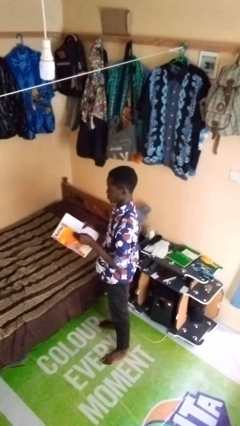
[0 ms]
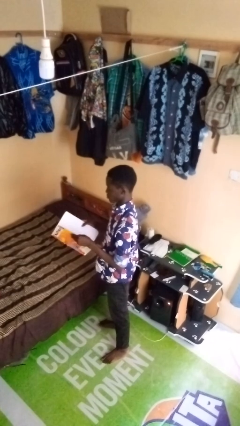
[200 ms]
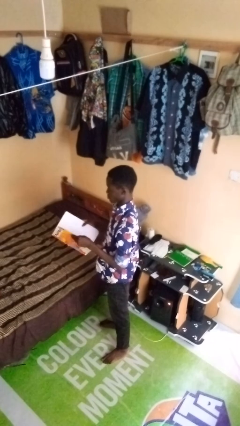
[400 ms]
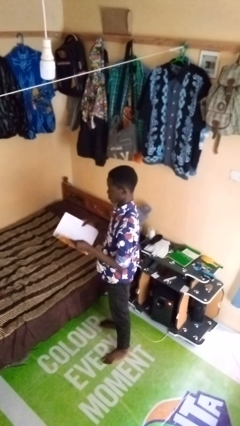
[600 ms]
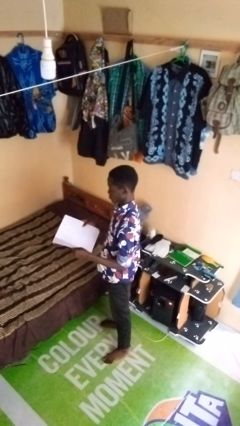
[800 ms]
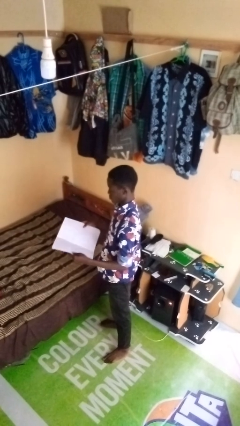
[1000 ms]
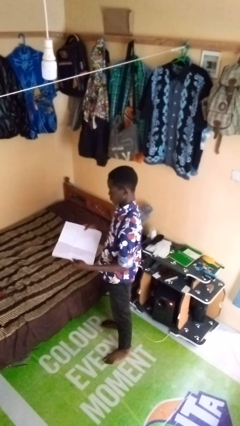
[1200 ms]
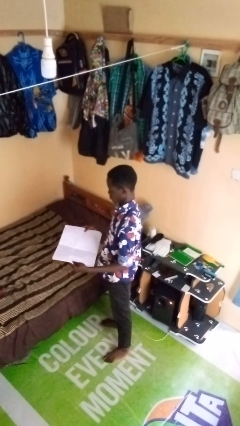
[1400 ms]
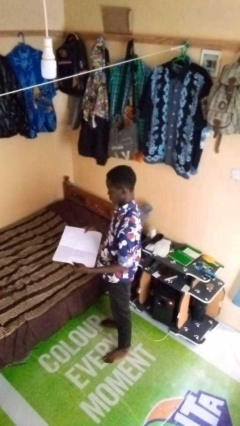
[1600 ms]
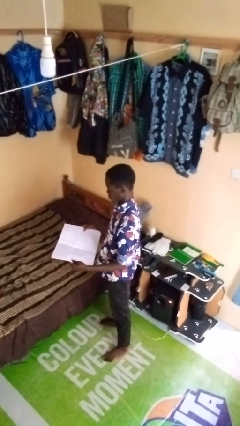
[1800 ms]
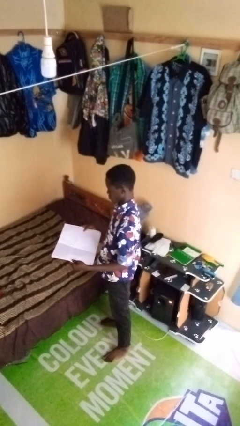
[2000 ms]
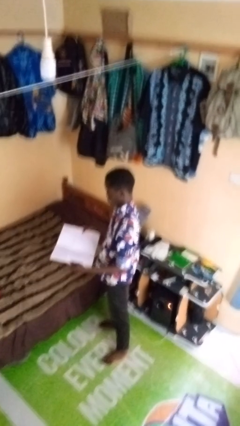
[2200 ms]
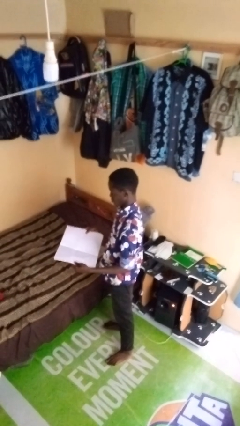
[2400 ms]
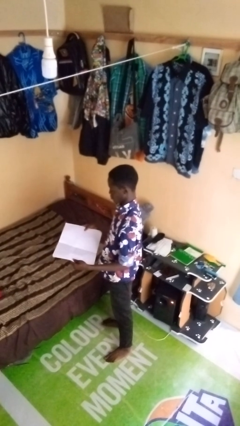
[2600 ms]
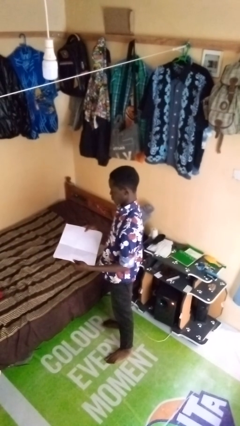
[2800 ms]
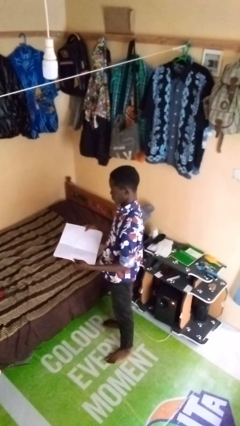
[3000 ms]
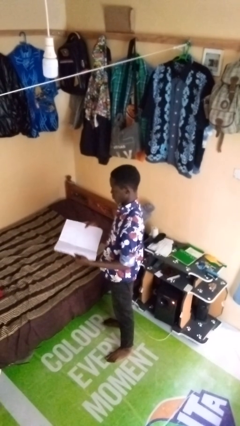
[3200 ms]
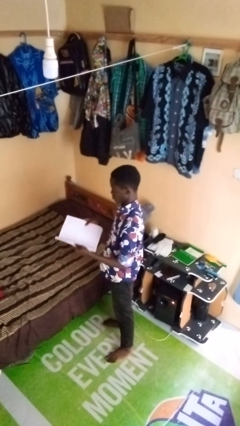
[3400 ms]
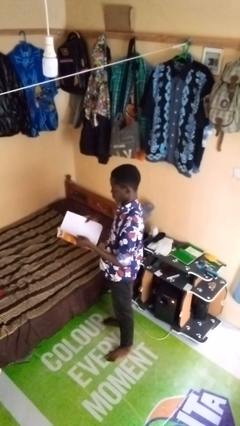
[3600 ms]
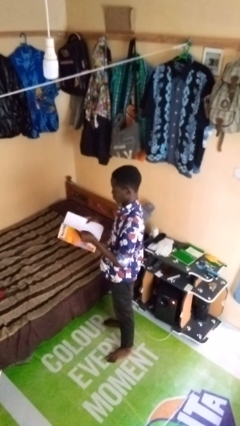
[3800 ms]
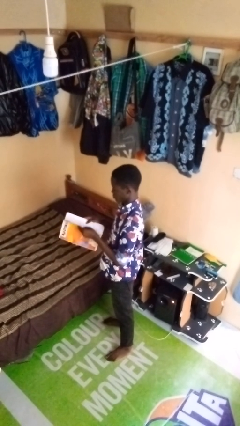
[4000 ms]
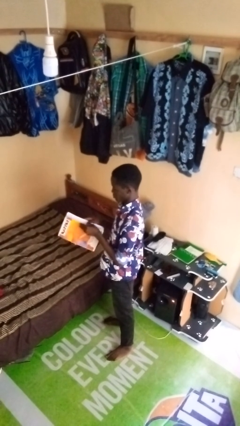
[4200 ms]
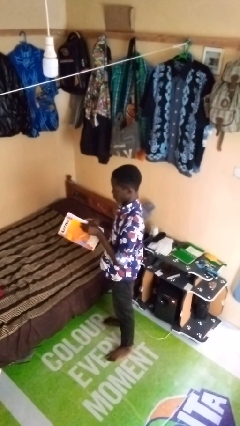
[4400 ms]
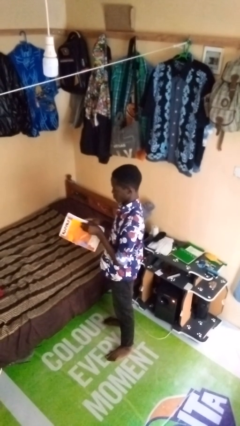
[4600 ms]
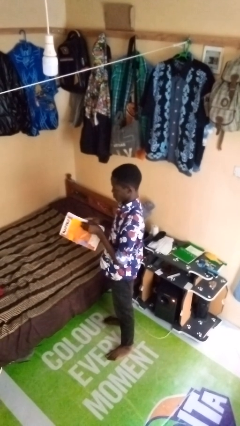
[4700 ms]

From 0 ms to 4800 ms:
person reads book

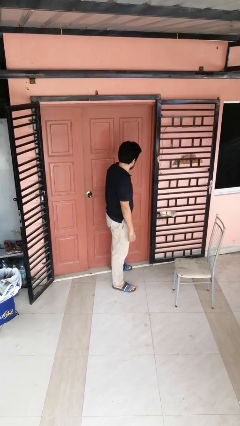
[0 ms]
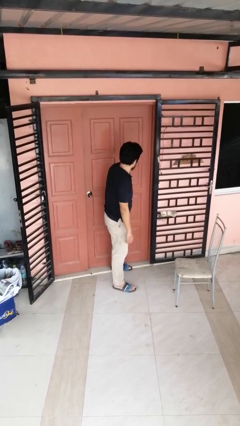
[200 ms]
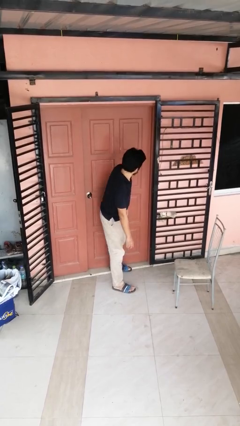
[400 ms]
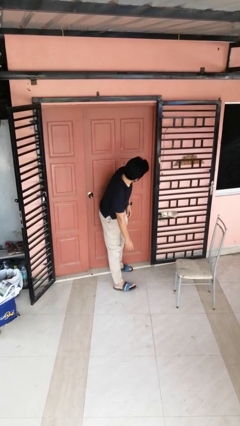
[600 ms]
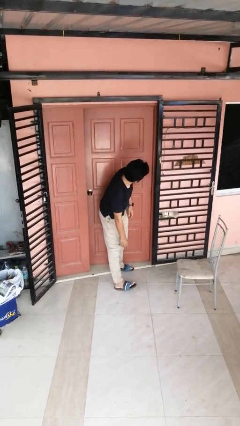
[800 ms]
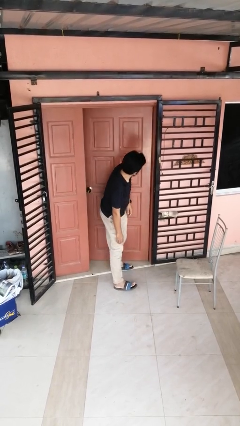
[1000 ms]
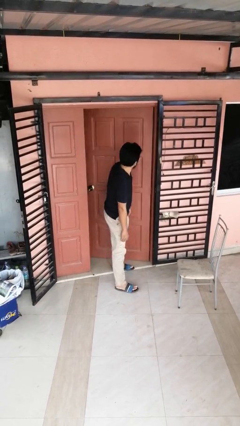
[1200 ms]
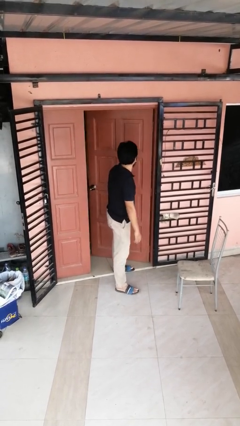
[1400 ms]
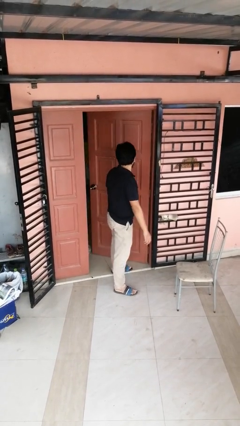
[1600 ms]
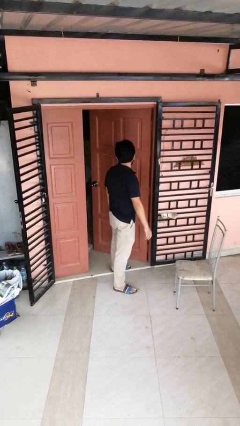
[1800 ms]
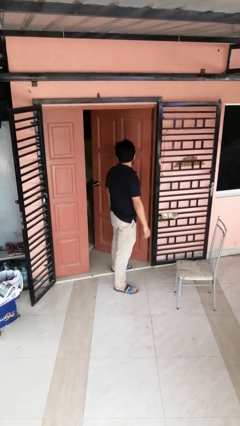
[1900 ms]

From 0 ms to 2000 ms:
person opens facility door

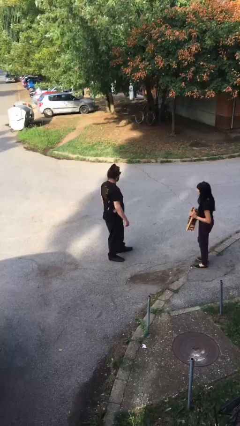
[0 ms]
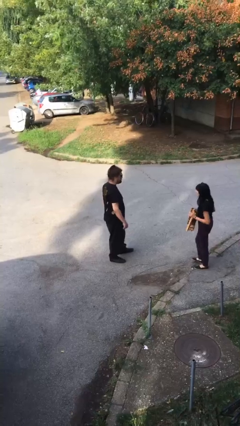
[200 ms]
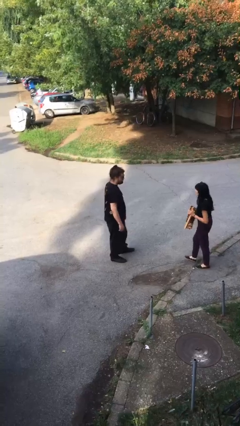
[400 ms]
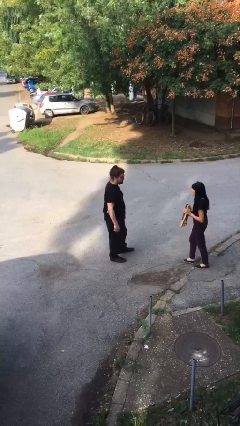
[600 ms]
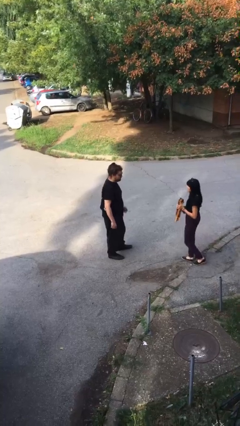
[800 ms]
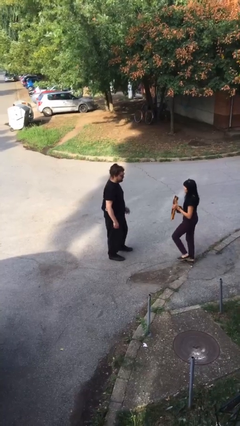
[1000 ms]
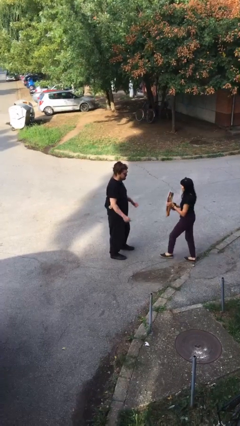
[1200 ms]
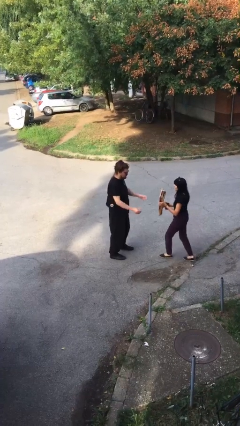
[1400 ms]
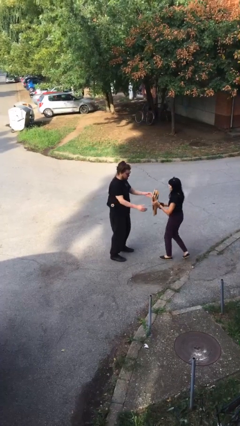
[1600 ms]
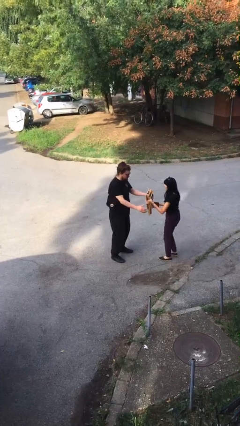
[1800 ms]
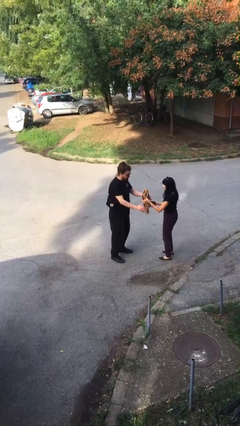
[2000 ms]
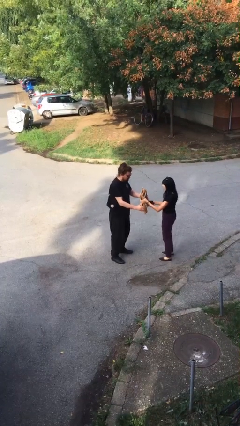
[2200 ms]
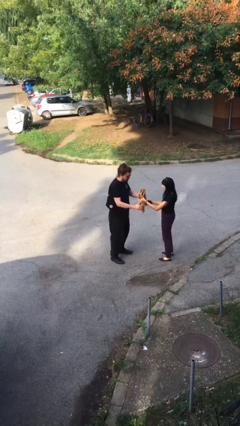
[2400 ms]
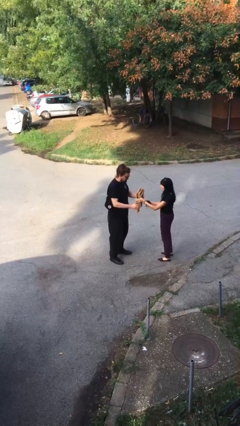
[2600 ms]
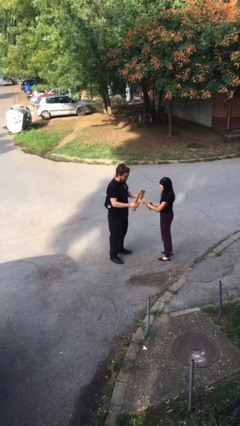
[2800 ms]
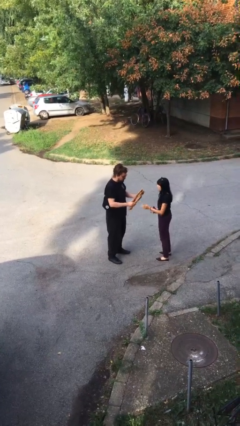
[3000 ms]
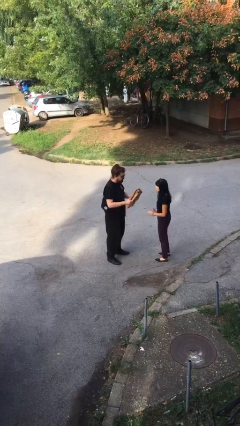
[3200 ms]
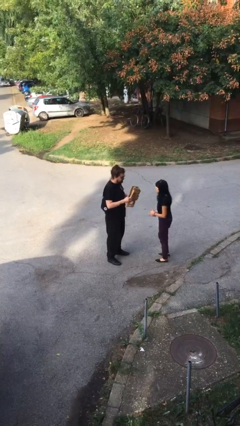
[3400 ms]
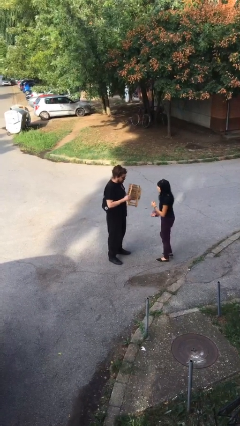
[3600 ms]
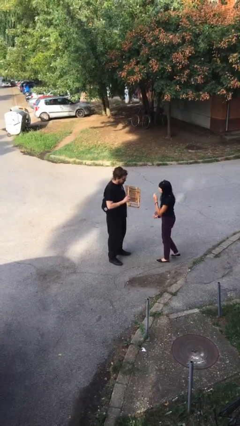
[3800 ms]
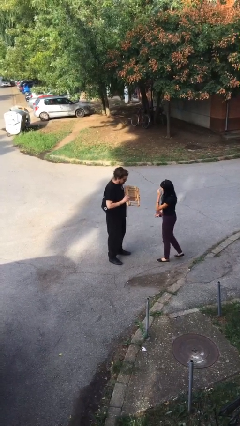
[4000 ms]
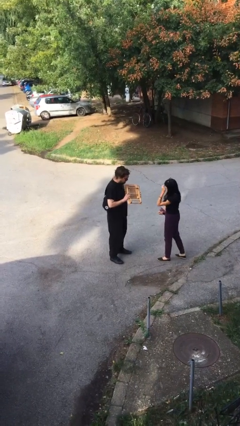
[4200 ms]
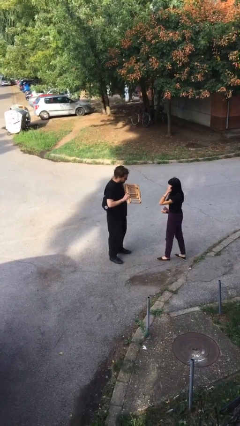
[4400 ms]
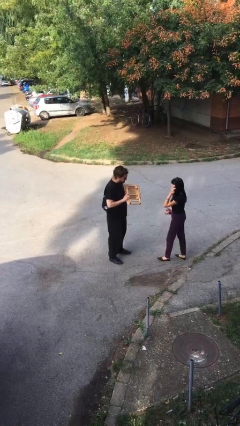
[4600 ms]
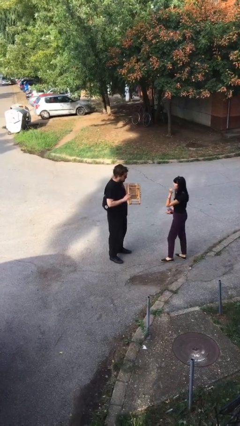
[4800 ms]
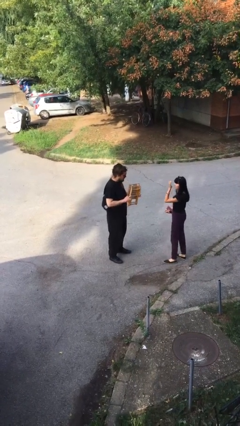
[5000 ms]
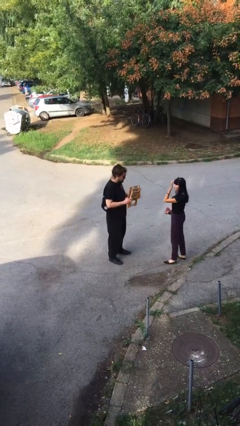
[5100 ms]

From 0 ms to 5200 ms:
person transfers object to person

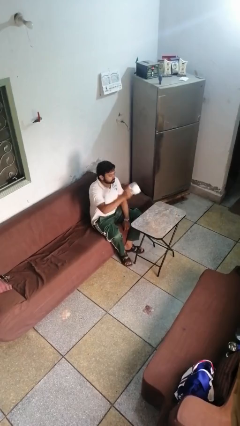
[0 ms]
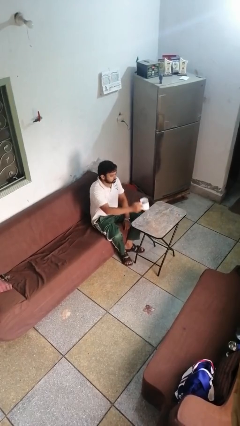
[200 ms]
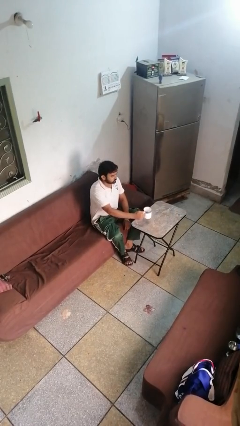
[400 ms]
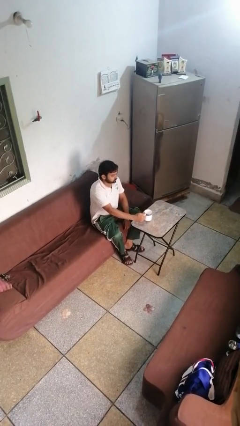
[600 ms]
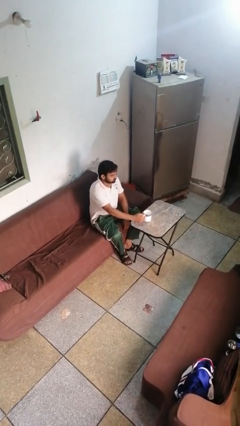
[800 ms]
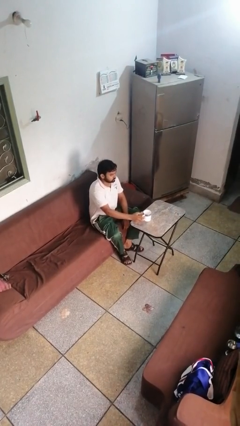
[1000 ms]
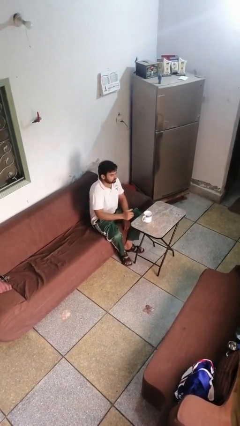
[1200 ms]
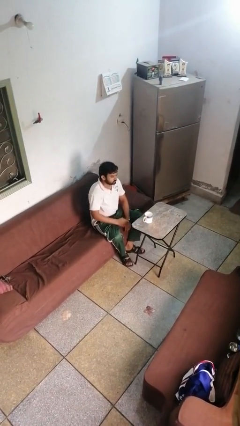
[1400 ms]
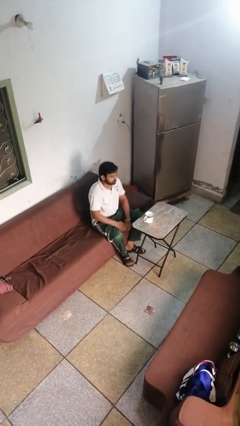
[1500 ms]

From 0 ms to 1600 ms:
person puts down object on table

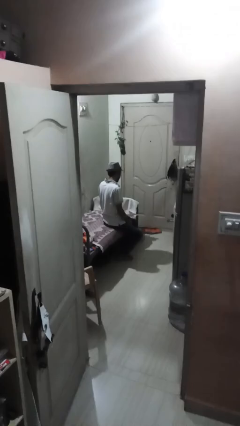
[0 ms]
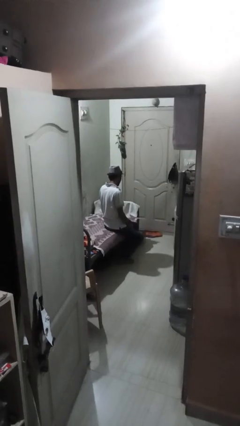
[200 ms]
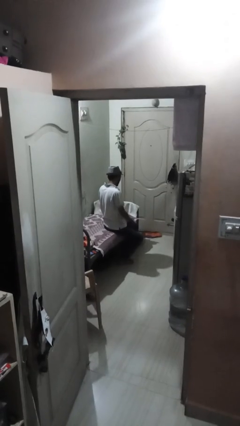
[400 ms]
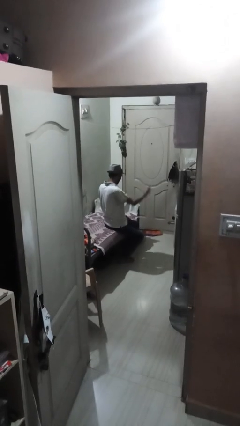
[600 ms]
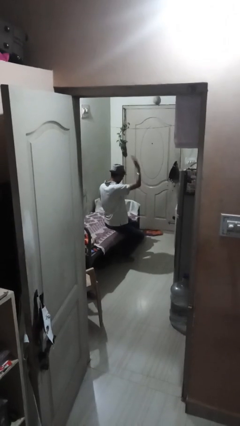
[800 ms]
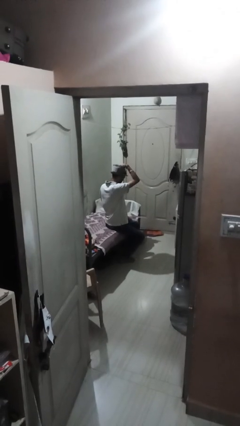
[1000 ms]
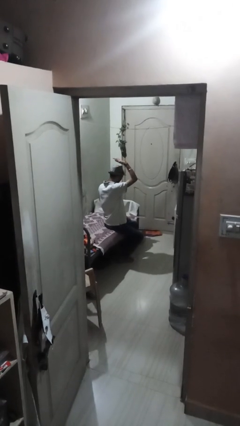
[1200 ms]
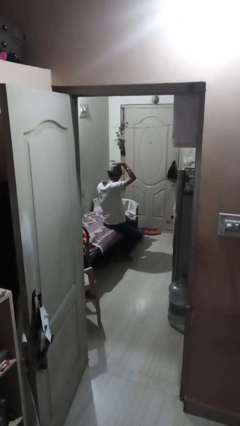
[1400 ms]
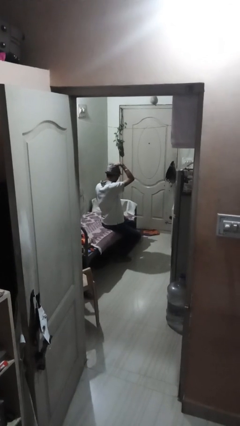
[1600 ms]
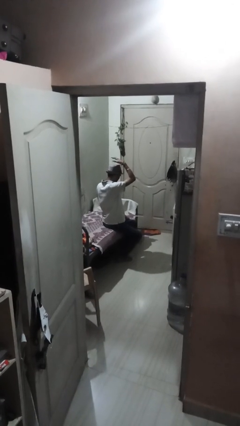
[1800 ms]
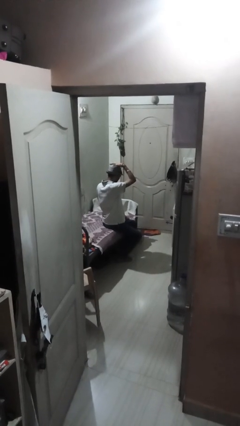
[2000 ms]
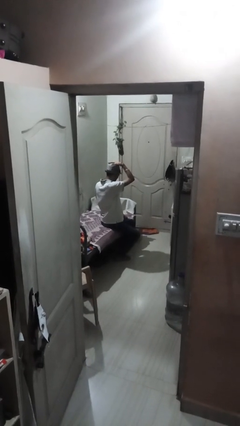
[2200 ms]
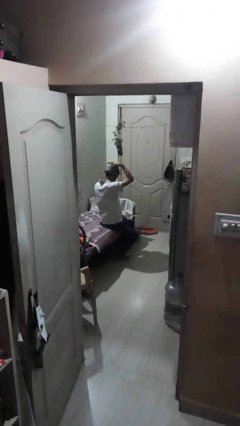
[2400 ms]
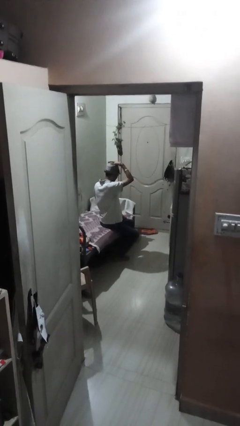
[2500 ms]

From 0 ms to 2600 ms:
person pats head

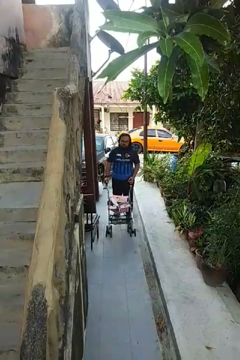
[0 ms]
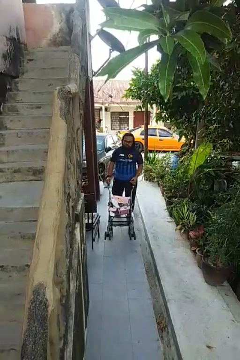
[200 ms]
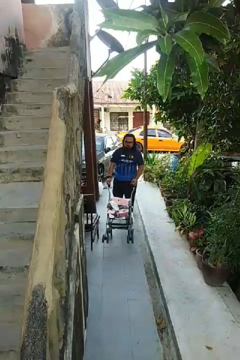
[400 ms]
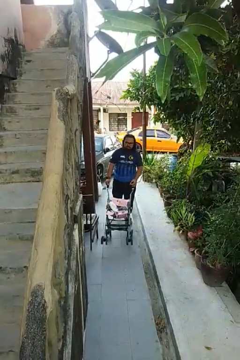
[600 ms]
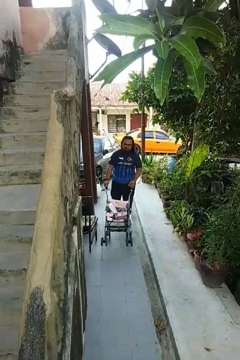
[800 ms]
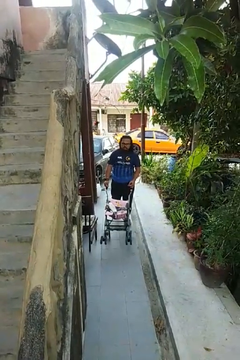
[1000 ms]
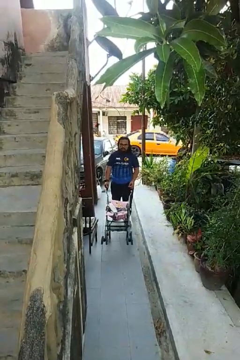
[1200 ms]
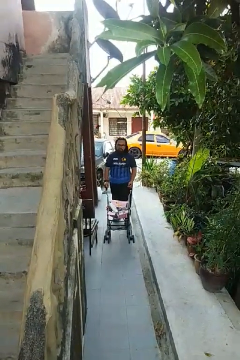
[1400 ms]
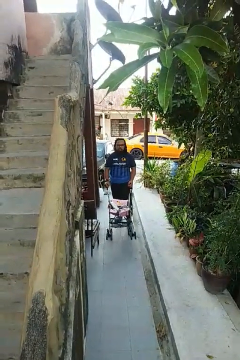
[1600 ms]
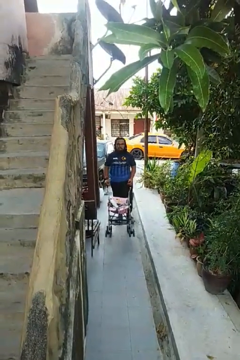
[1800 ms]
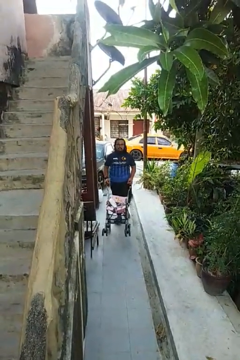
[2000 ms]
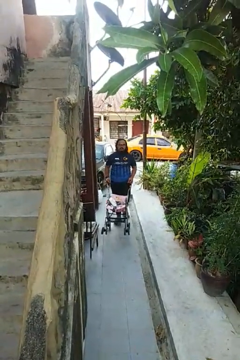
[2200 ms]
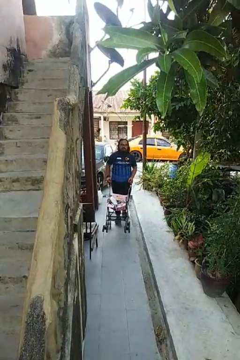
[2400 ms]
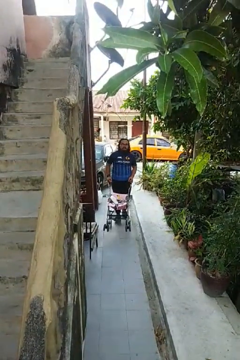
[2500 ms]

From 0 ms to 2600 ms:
person pulls wheeled cart
